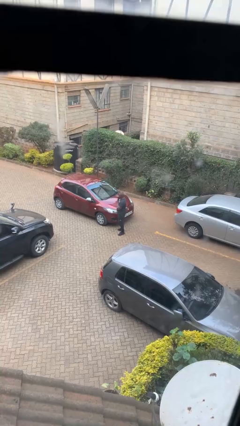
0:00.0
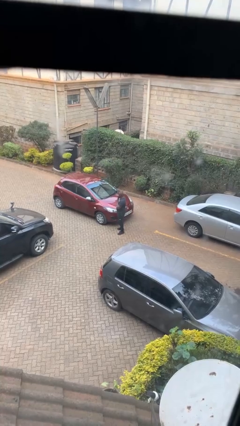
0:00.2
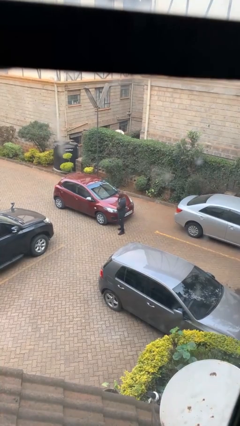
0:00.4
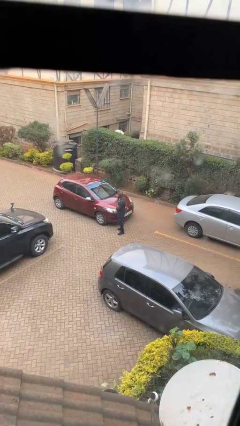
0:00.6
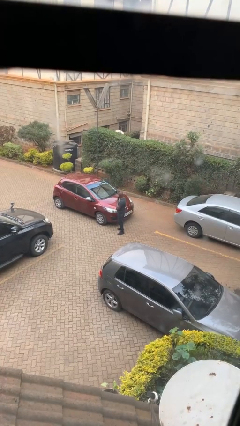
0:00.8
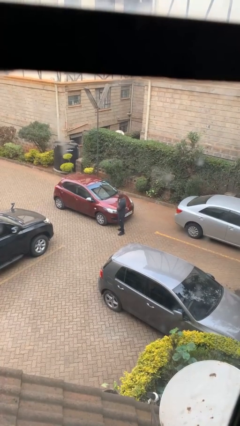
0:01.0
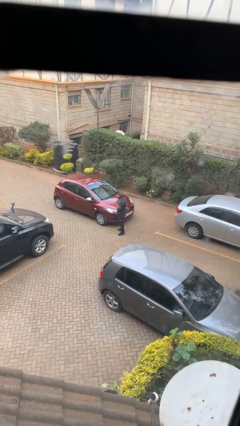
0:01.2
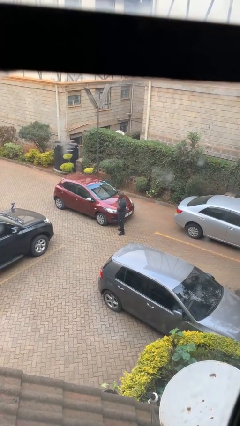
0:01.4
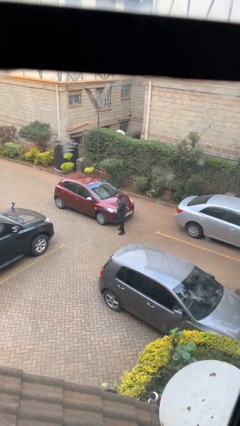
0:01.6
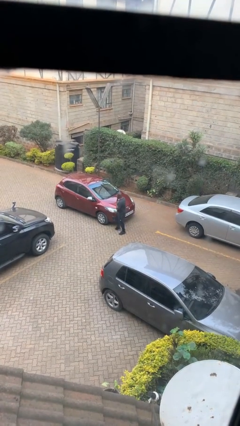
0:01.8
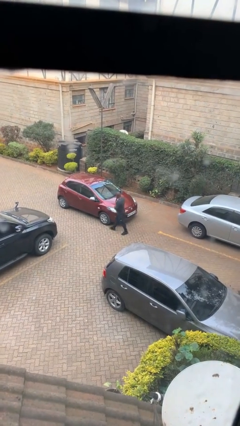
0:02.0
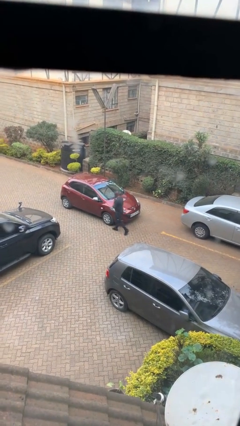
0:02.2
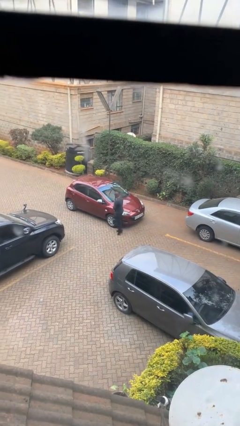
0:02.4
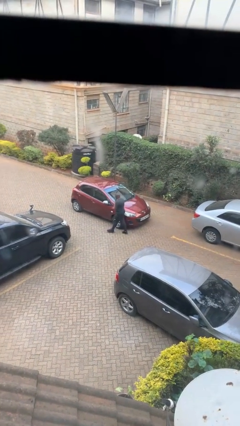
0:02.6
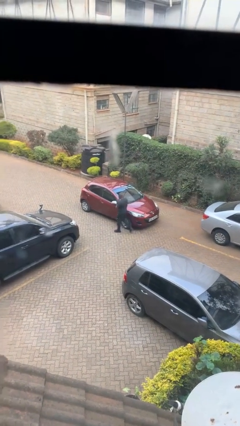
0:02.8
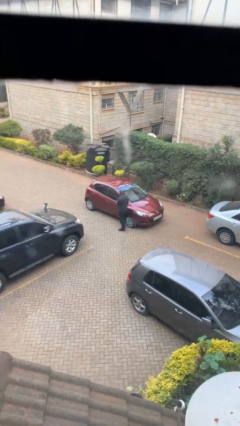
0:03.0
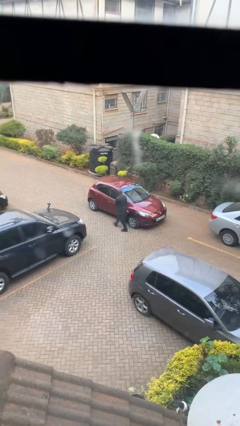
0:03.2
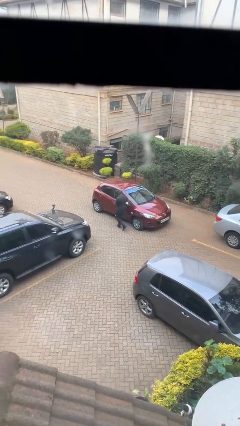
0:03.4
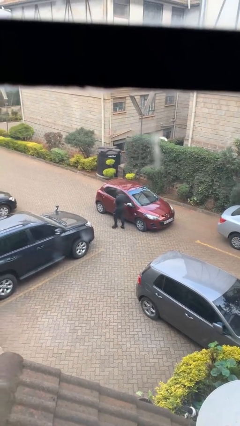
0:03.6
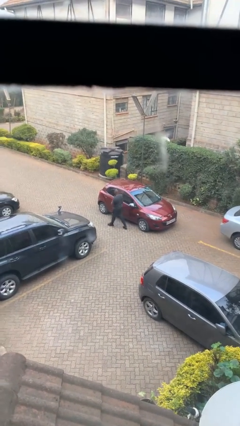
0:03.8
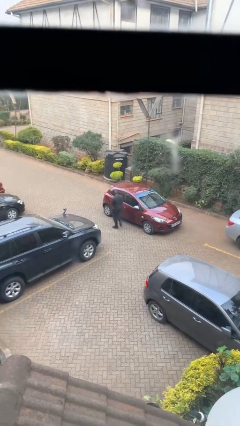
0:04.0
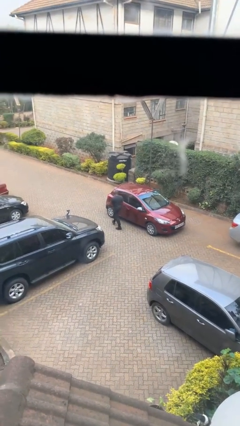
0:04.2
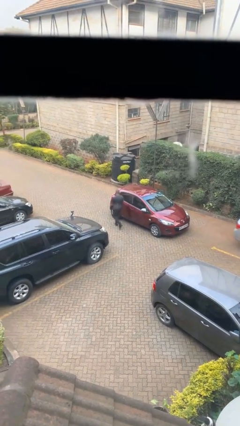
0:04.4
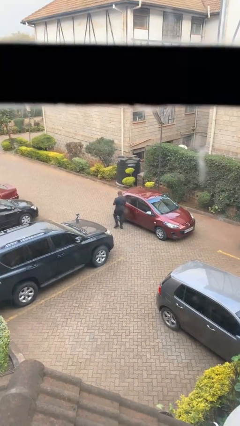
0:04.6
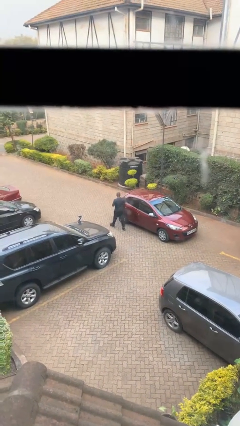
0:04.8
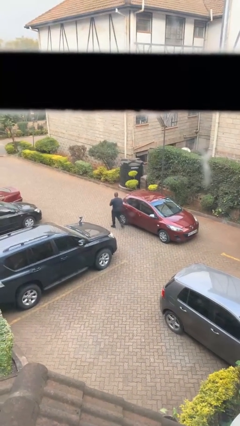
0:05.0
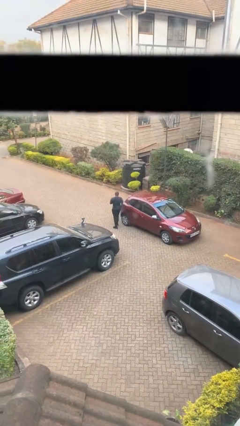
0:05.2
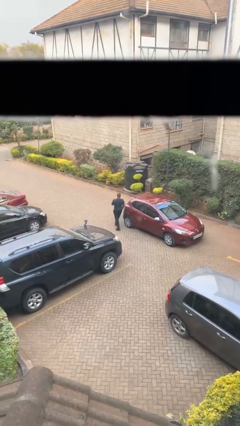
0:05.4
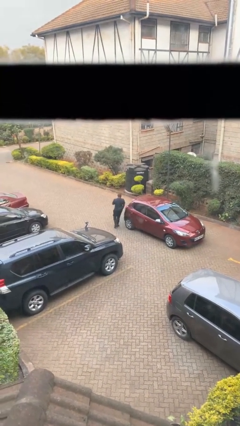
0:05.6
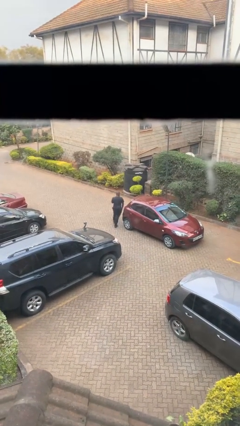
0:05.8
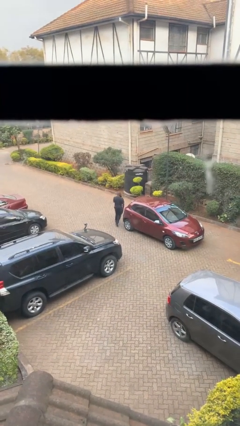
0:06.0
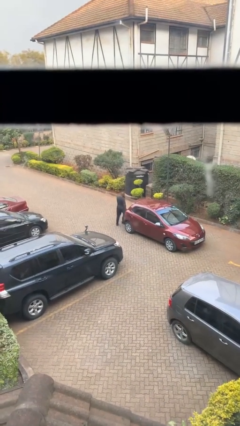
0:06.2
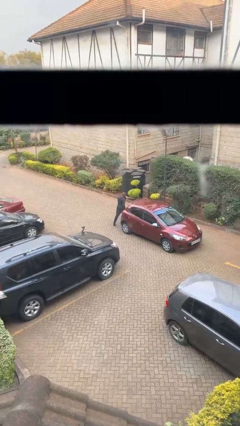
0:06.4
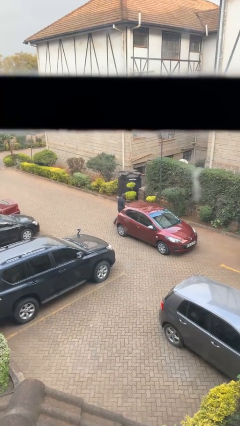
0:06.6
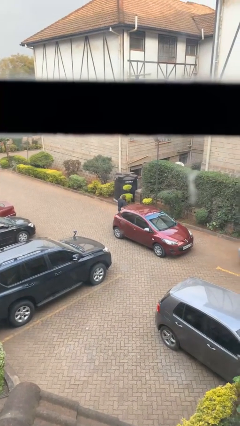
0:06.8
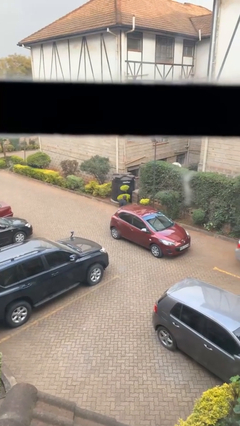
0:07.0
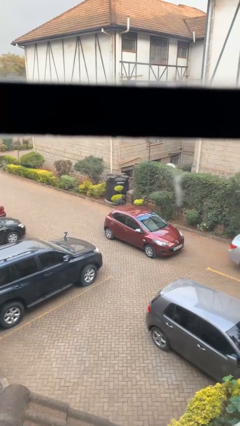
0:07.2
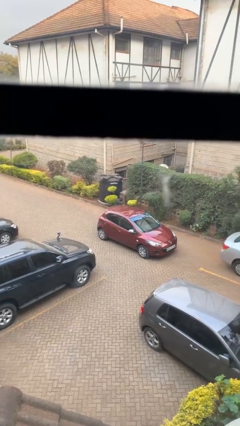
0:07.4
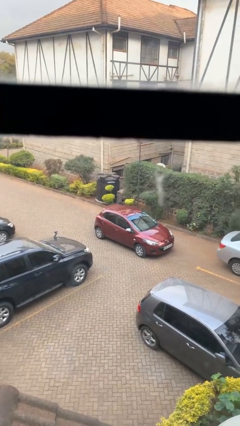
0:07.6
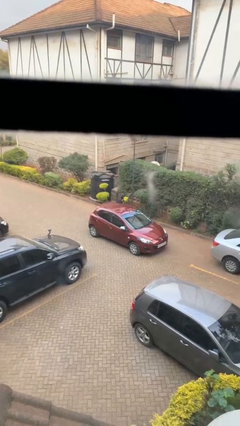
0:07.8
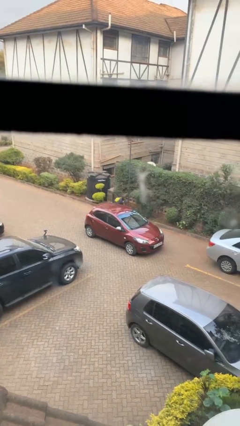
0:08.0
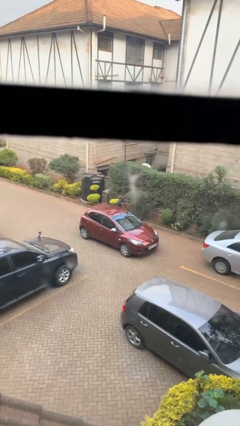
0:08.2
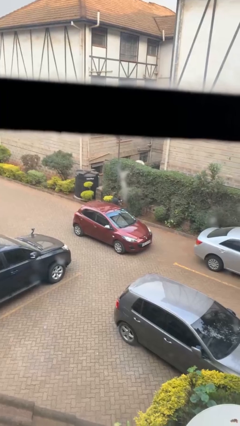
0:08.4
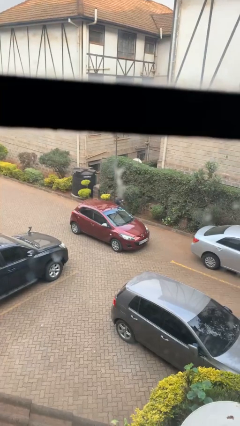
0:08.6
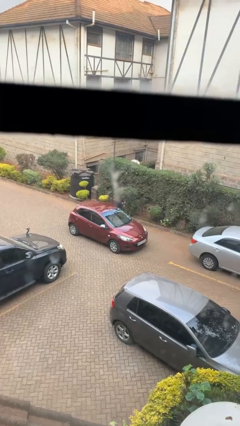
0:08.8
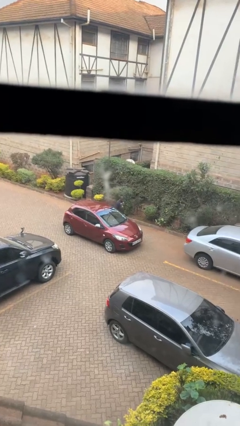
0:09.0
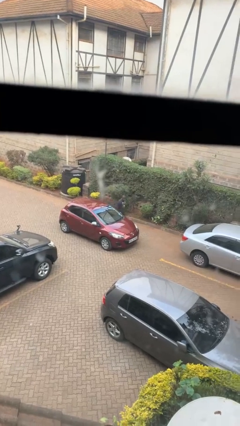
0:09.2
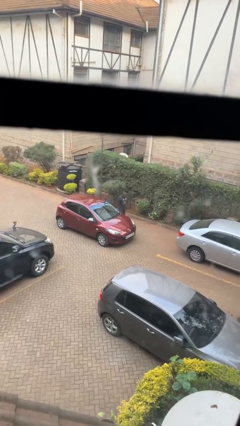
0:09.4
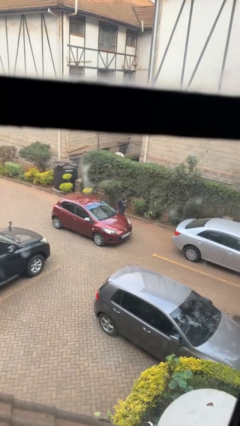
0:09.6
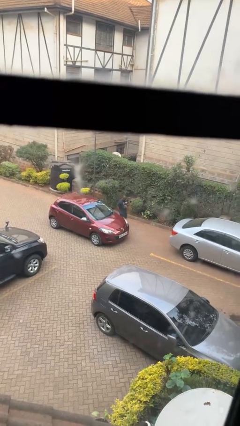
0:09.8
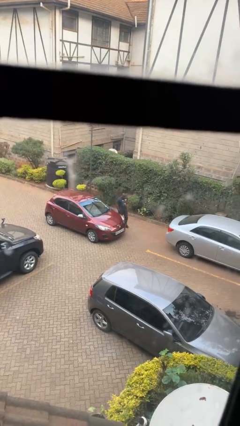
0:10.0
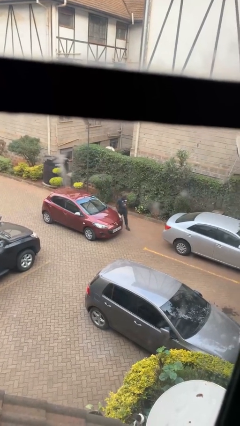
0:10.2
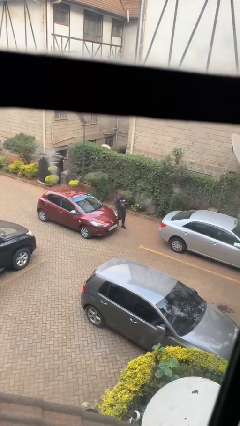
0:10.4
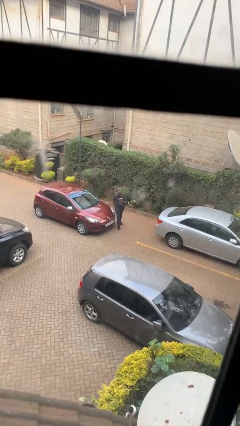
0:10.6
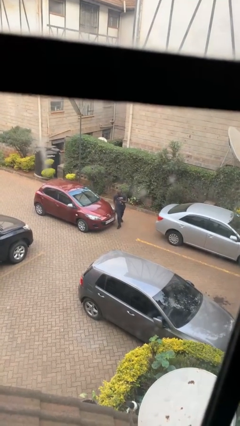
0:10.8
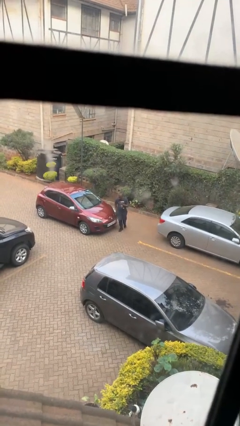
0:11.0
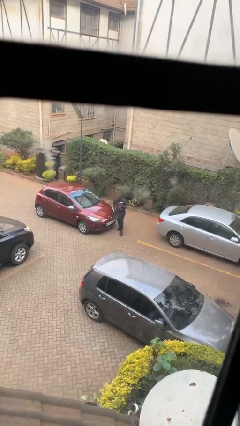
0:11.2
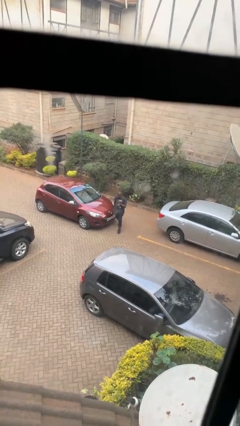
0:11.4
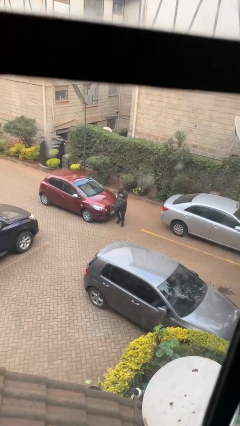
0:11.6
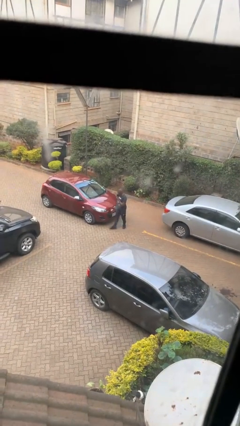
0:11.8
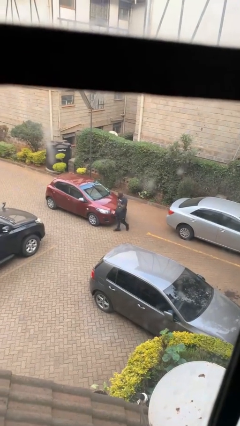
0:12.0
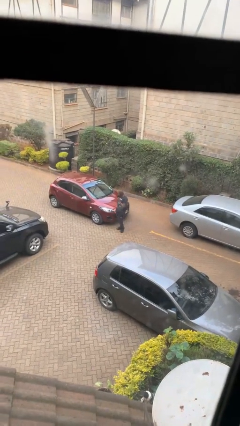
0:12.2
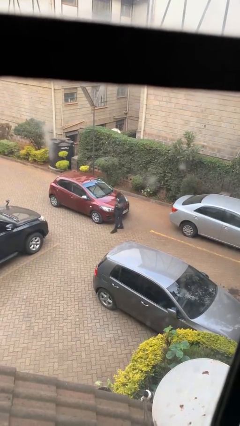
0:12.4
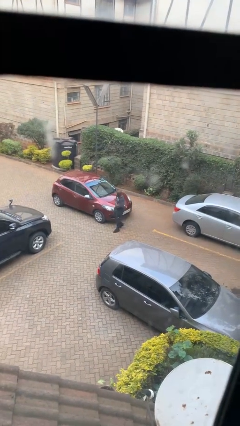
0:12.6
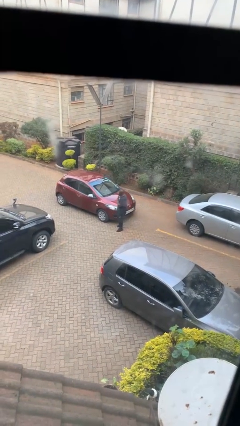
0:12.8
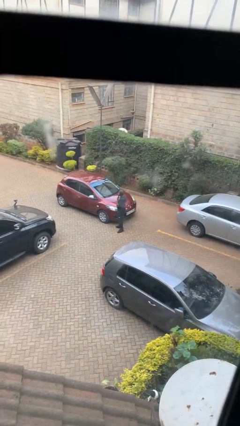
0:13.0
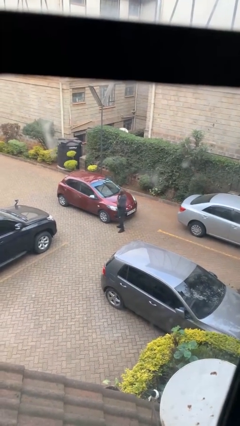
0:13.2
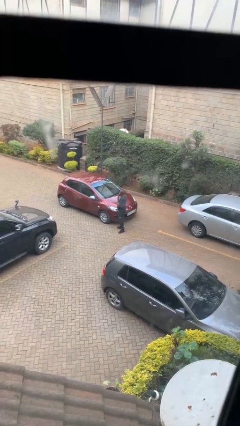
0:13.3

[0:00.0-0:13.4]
person walks around car

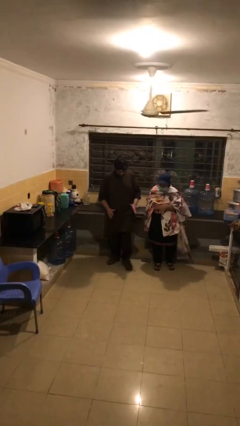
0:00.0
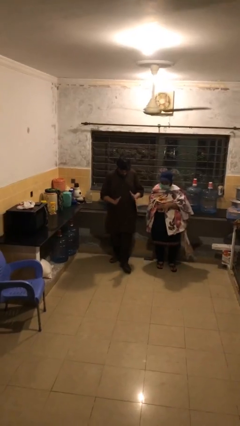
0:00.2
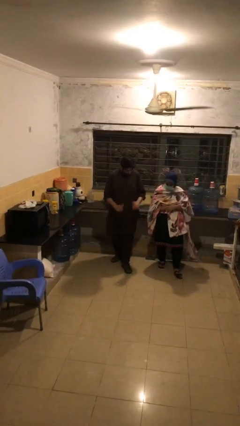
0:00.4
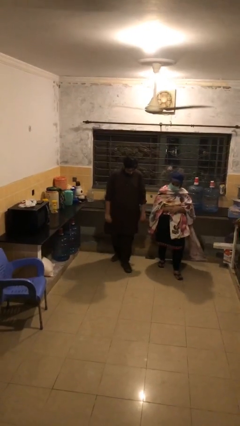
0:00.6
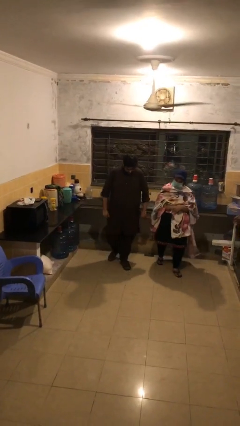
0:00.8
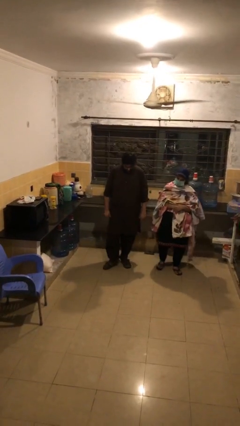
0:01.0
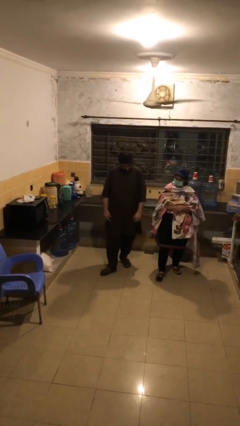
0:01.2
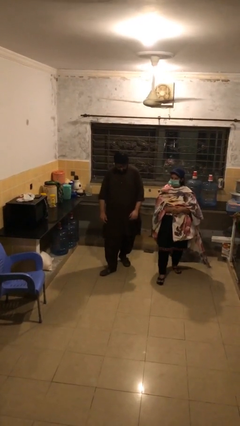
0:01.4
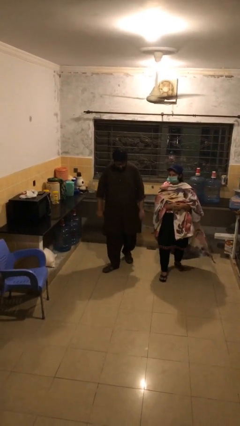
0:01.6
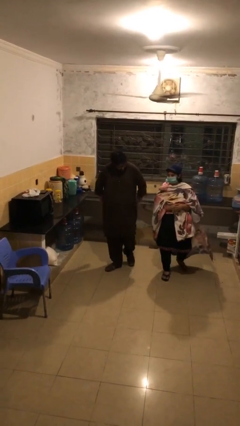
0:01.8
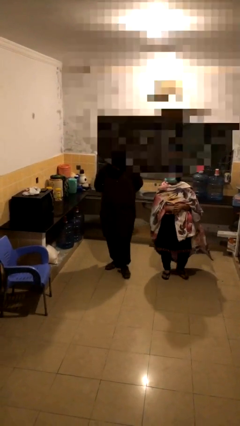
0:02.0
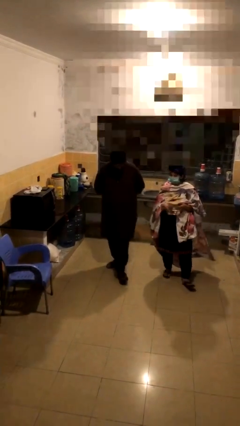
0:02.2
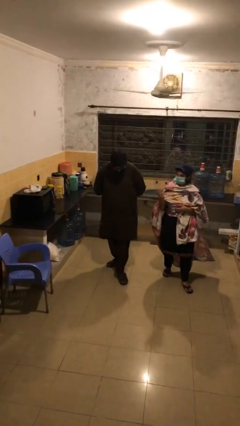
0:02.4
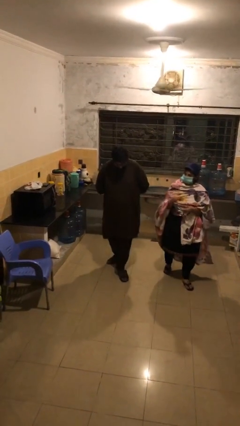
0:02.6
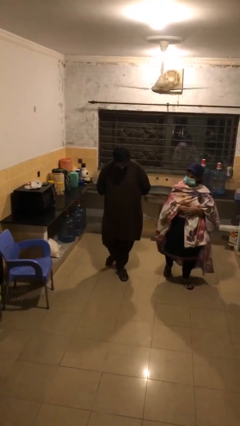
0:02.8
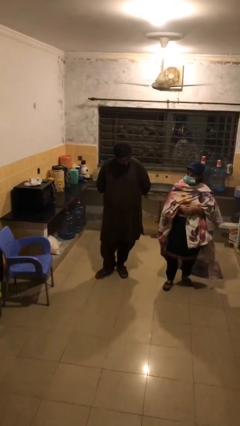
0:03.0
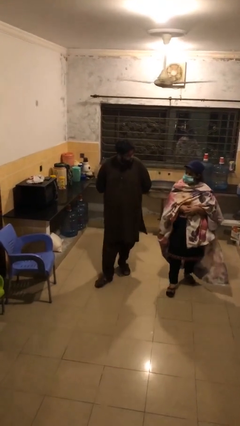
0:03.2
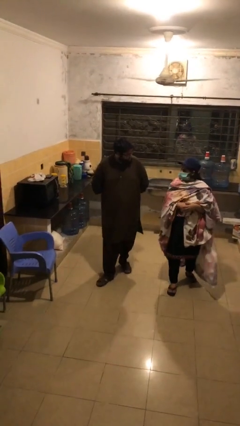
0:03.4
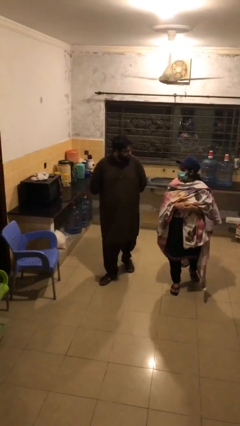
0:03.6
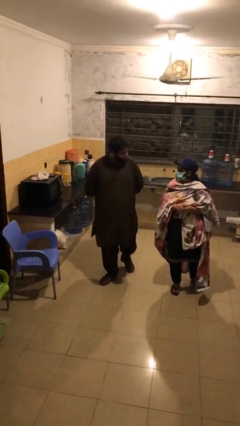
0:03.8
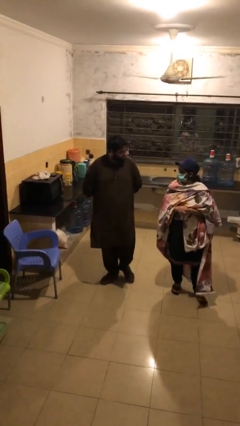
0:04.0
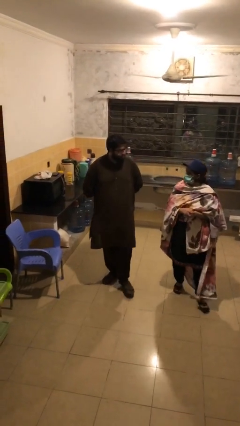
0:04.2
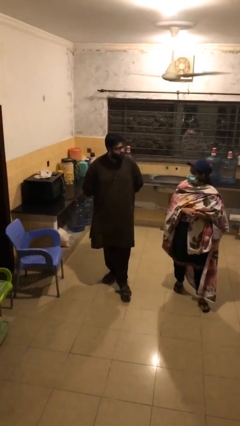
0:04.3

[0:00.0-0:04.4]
person talks to person

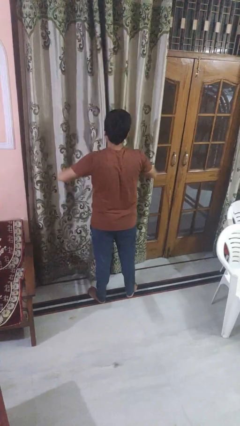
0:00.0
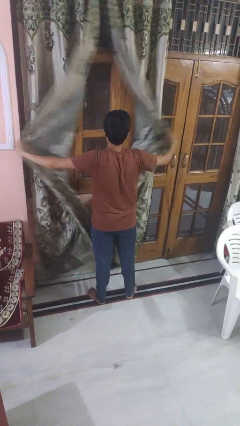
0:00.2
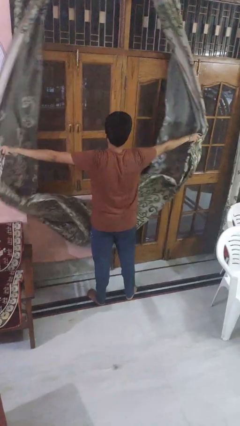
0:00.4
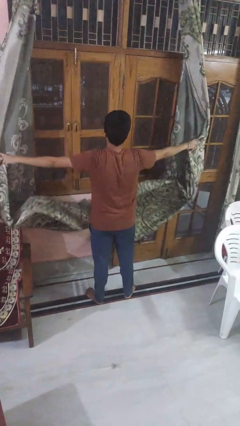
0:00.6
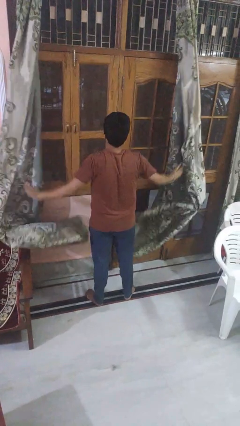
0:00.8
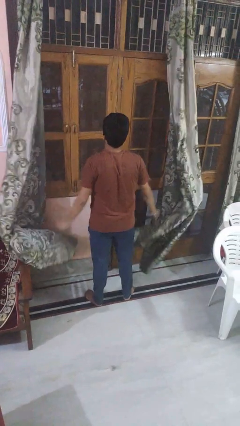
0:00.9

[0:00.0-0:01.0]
person opens curtains
